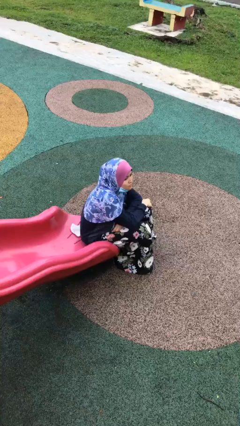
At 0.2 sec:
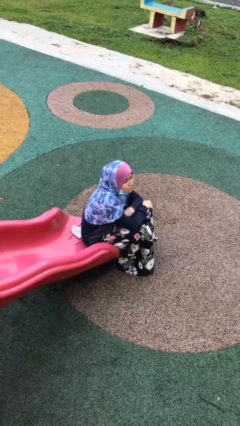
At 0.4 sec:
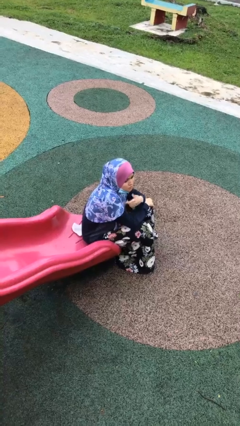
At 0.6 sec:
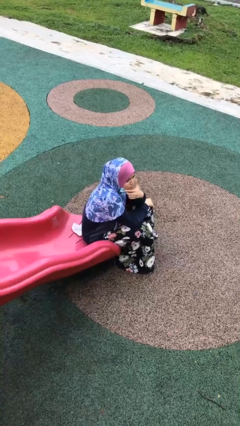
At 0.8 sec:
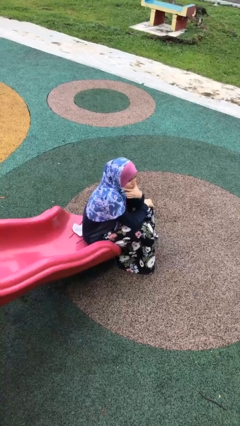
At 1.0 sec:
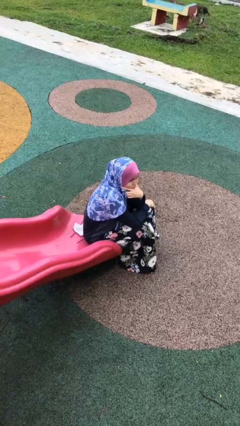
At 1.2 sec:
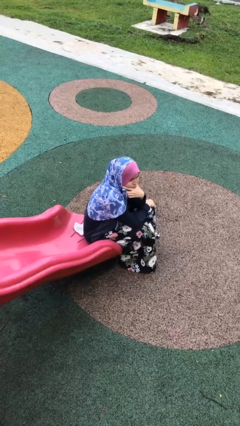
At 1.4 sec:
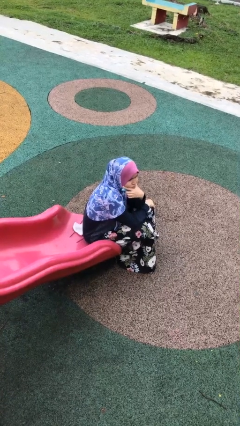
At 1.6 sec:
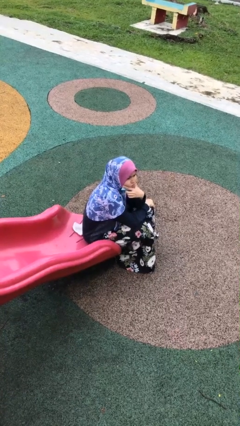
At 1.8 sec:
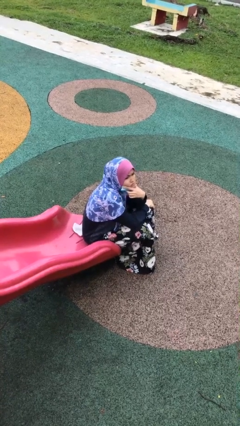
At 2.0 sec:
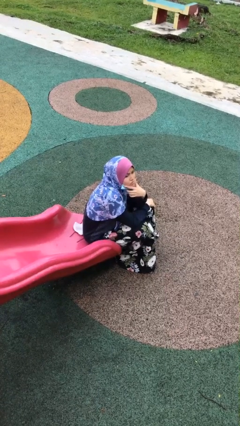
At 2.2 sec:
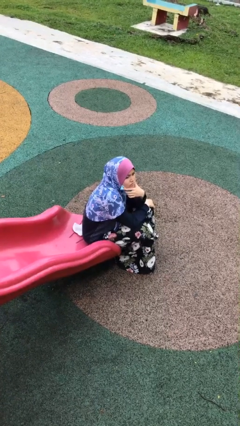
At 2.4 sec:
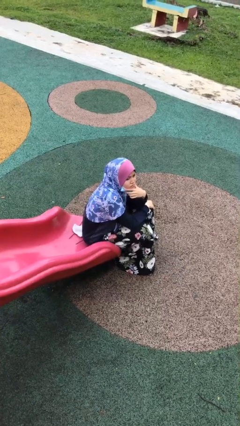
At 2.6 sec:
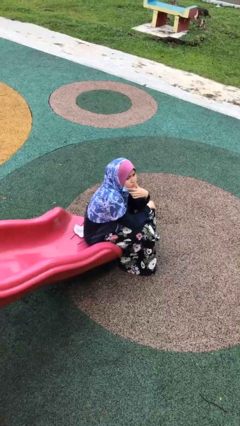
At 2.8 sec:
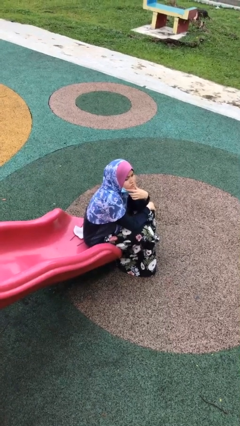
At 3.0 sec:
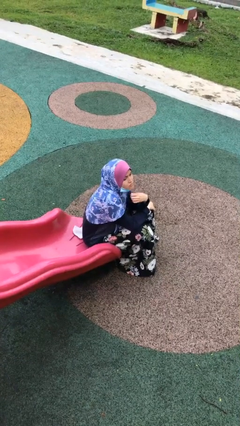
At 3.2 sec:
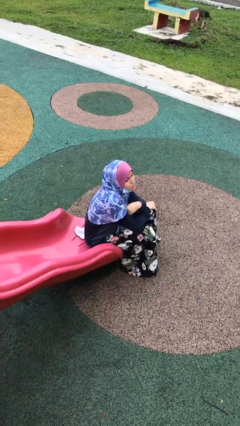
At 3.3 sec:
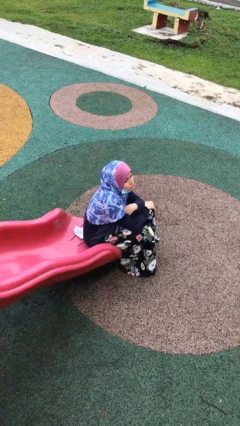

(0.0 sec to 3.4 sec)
person strokes chin

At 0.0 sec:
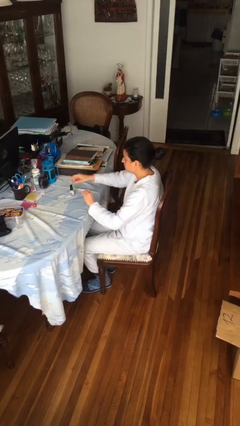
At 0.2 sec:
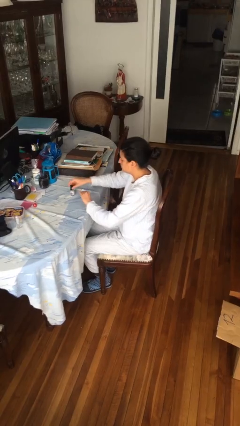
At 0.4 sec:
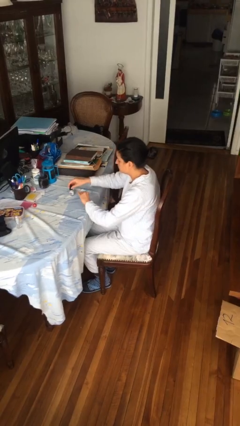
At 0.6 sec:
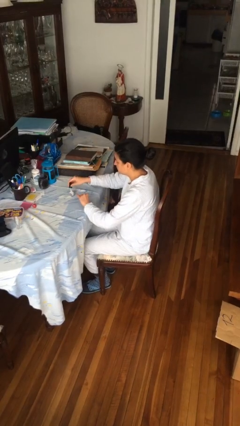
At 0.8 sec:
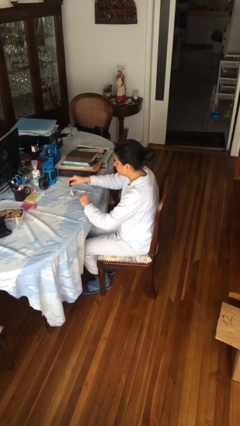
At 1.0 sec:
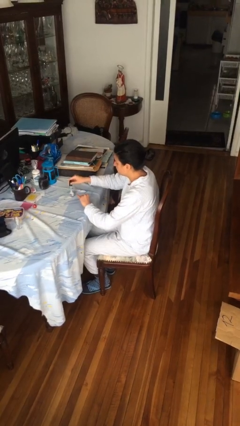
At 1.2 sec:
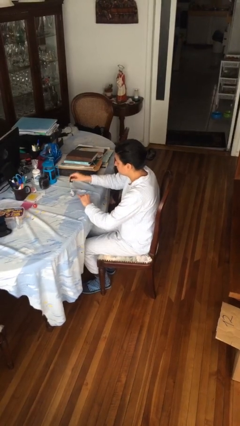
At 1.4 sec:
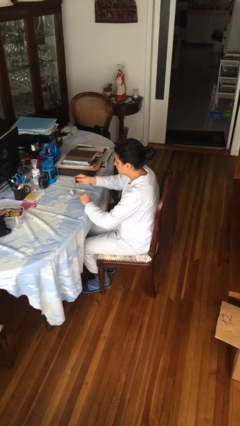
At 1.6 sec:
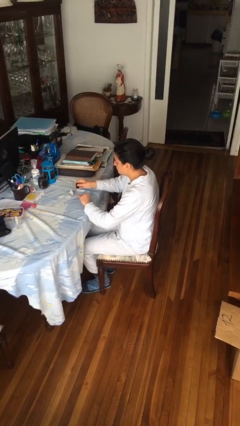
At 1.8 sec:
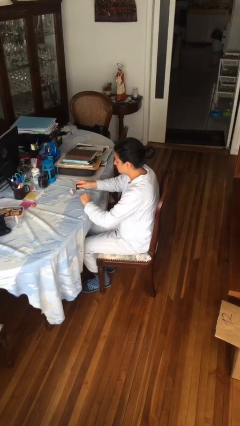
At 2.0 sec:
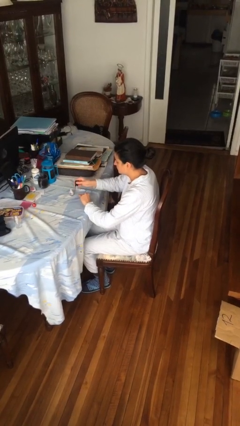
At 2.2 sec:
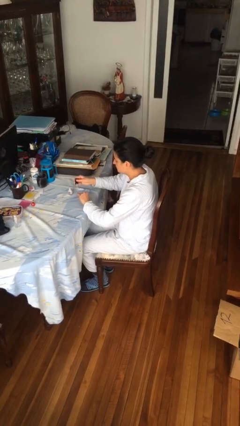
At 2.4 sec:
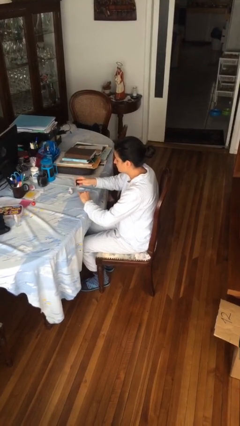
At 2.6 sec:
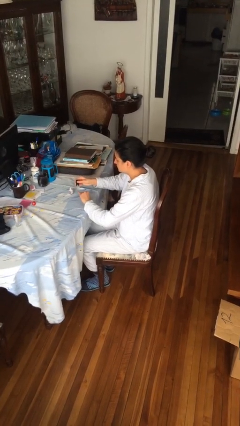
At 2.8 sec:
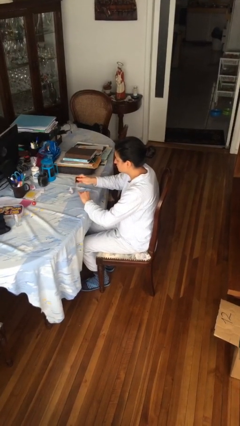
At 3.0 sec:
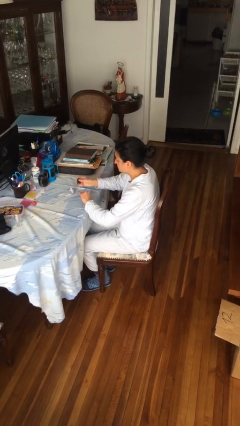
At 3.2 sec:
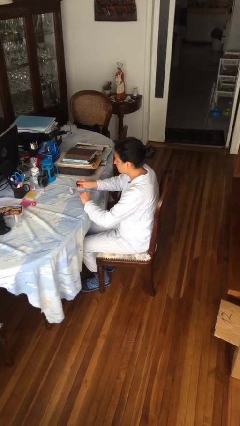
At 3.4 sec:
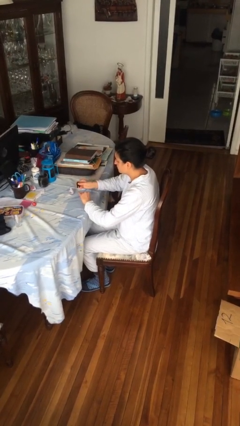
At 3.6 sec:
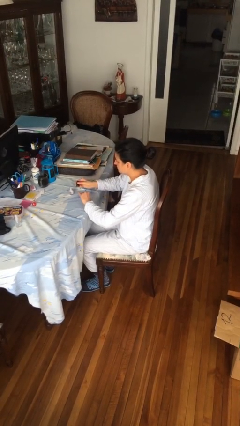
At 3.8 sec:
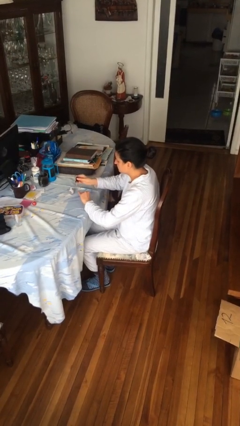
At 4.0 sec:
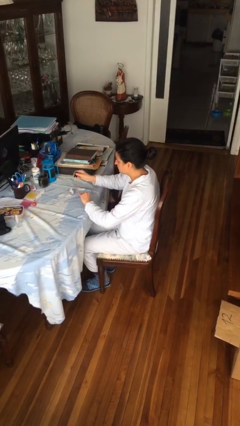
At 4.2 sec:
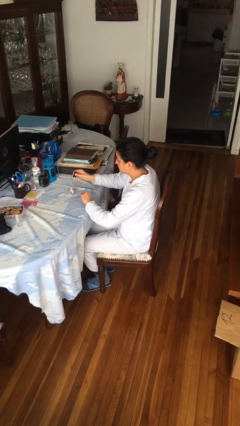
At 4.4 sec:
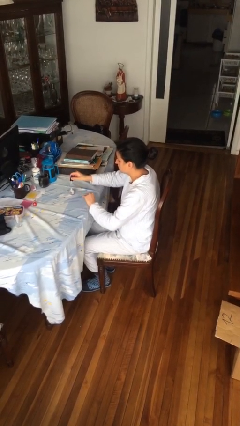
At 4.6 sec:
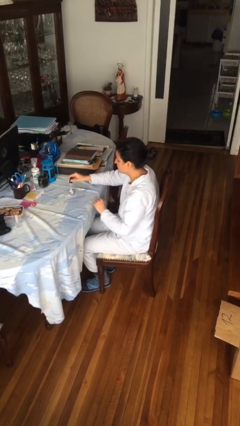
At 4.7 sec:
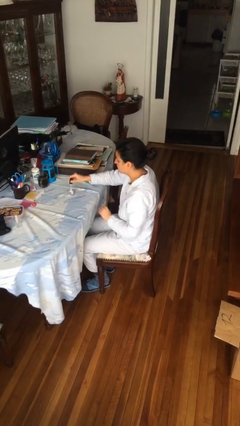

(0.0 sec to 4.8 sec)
person paints fingernails

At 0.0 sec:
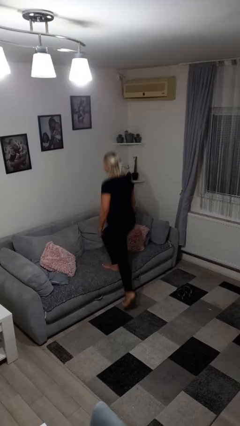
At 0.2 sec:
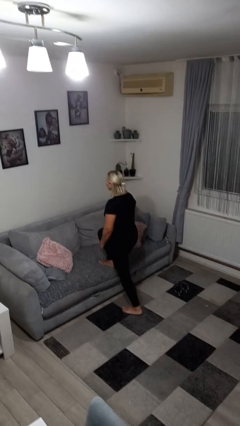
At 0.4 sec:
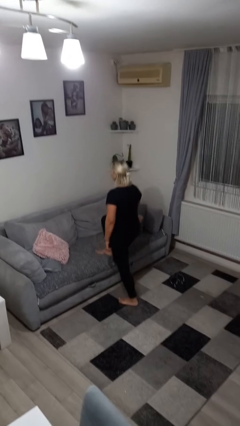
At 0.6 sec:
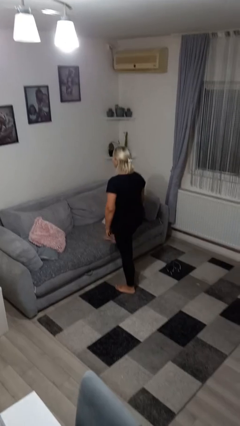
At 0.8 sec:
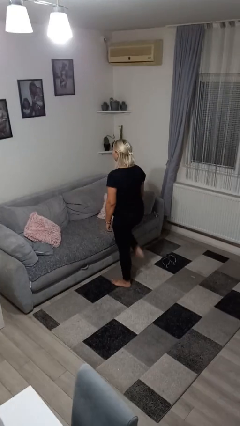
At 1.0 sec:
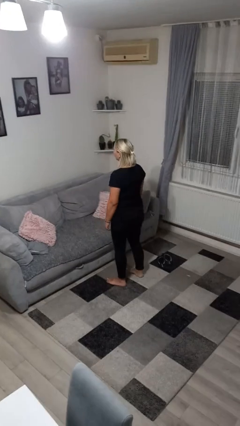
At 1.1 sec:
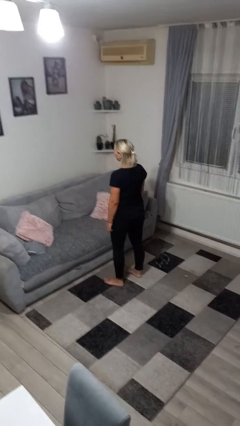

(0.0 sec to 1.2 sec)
person climbs off couch

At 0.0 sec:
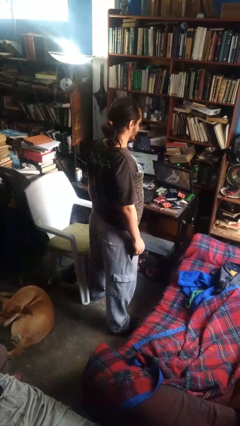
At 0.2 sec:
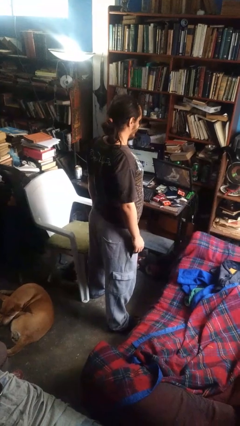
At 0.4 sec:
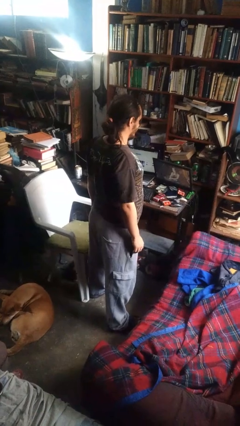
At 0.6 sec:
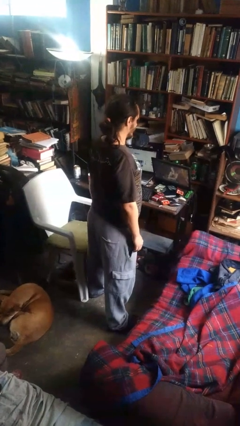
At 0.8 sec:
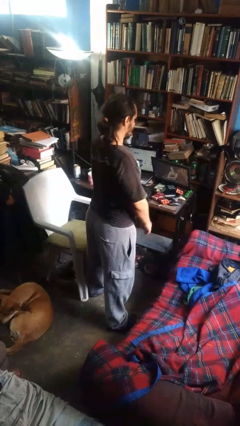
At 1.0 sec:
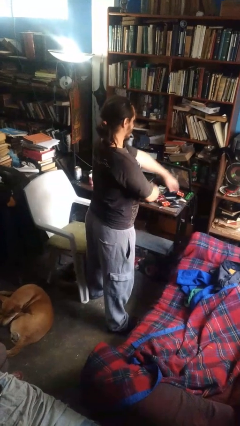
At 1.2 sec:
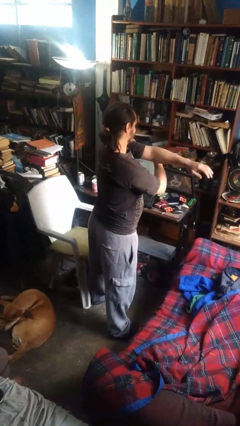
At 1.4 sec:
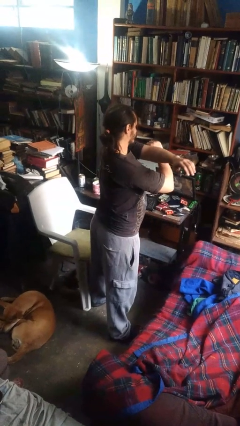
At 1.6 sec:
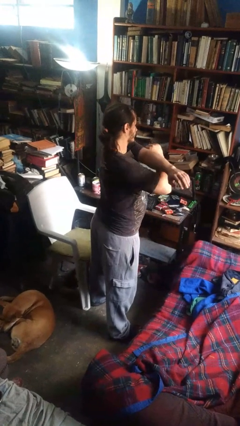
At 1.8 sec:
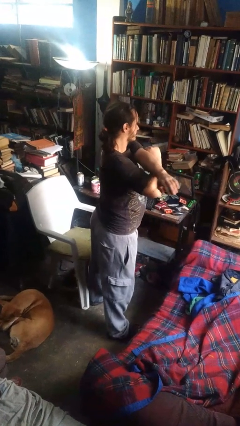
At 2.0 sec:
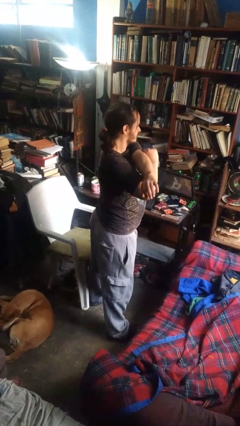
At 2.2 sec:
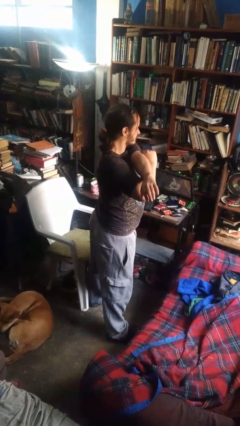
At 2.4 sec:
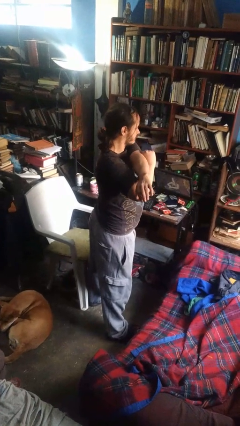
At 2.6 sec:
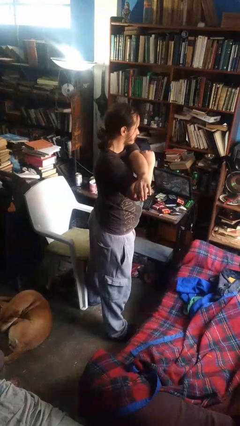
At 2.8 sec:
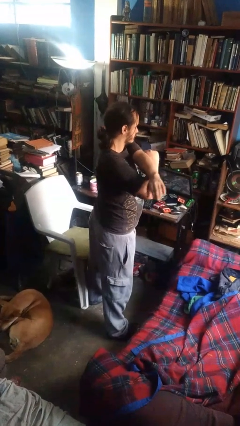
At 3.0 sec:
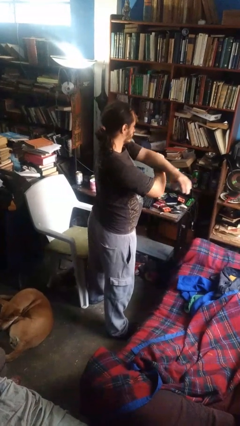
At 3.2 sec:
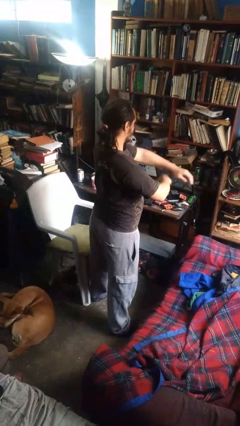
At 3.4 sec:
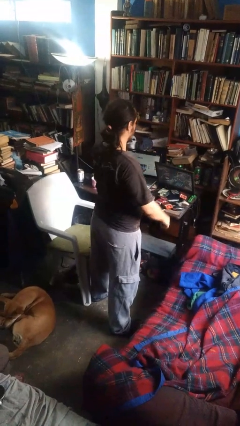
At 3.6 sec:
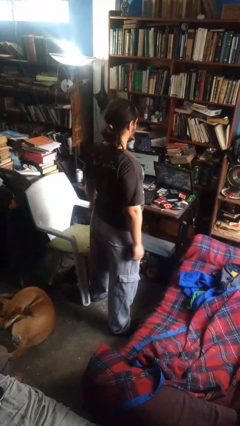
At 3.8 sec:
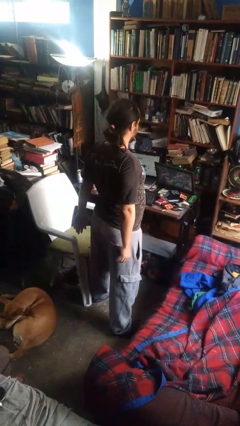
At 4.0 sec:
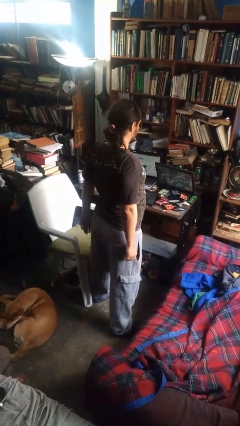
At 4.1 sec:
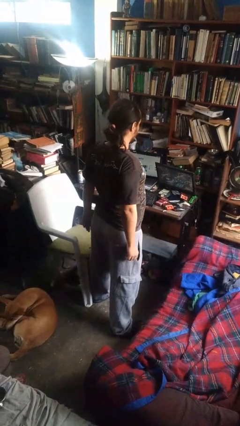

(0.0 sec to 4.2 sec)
person stretches arms to side

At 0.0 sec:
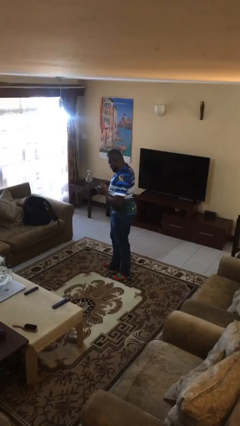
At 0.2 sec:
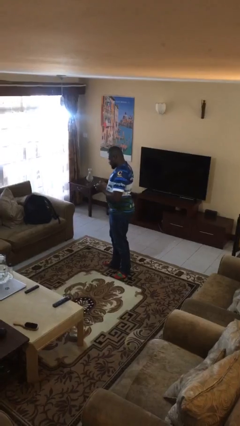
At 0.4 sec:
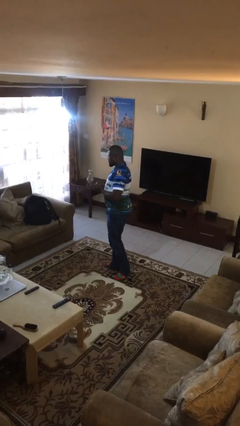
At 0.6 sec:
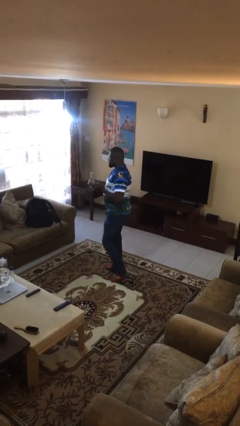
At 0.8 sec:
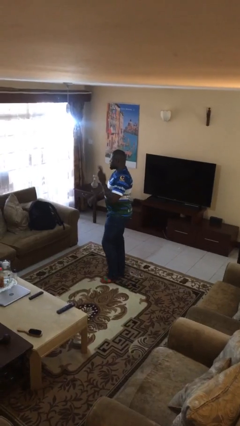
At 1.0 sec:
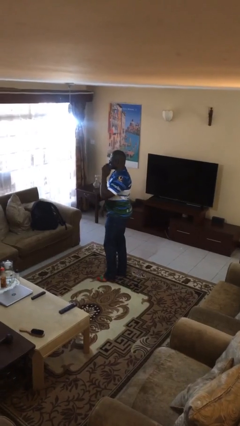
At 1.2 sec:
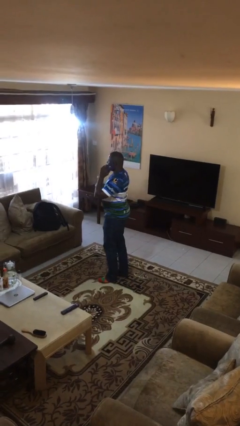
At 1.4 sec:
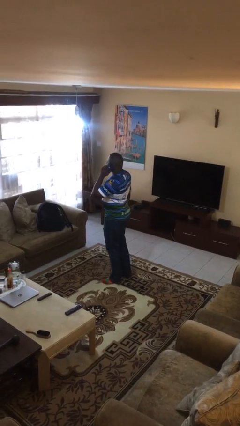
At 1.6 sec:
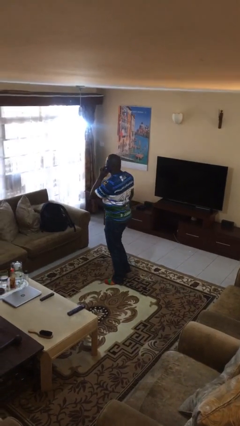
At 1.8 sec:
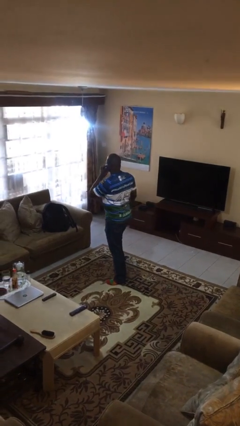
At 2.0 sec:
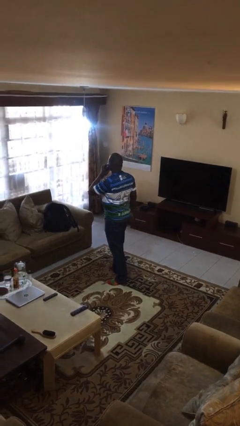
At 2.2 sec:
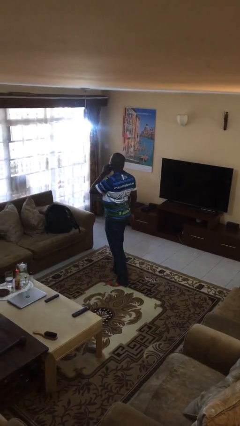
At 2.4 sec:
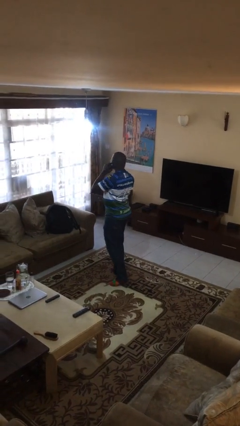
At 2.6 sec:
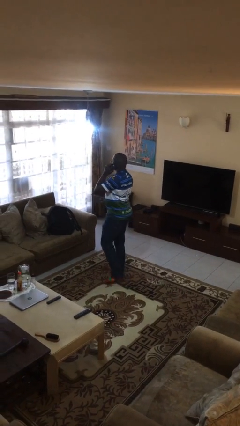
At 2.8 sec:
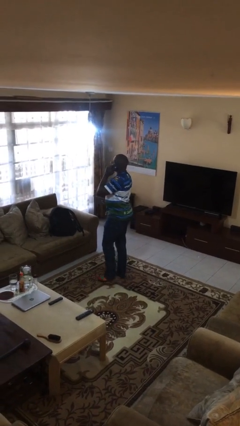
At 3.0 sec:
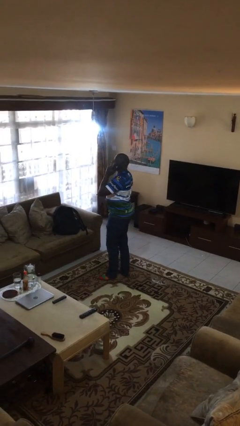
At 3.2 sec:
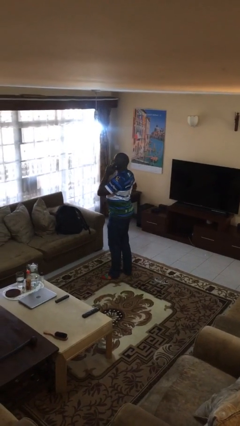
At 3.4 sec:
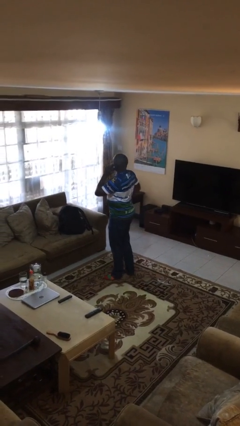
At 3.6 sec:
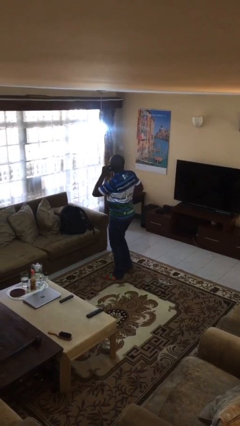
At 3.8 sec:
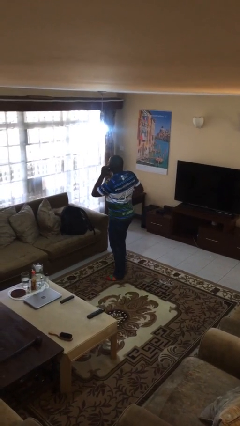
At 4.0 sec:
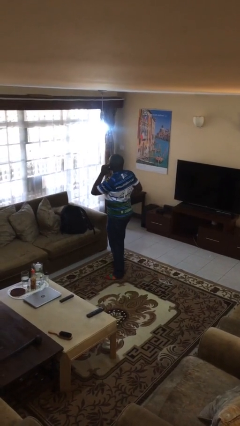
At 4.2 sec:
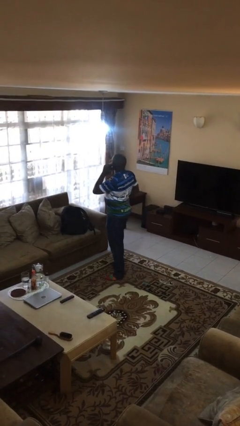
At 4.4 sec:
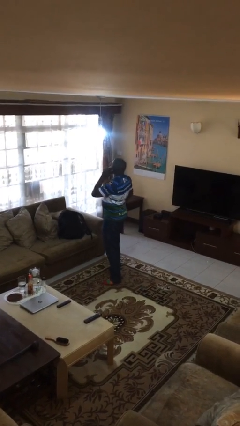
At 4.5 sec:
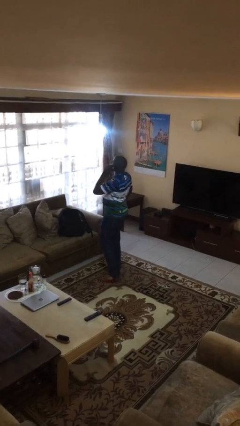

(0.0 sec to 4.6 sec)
person talks on phone
